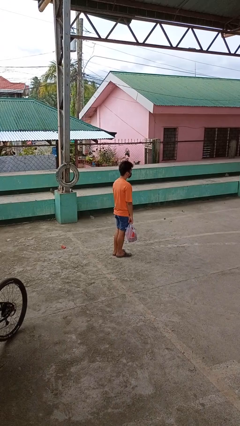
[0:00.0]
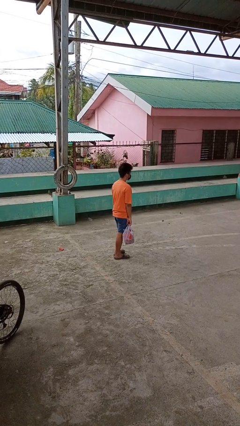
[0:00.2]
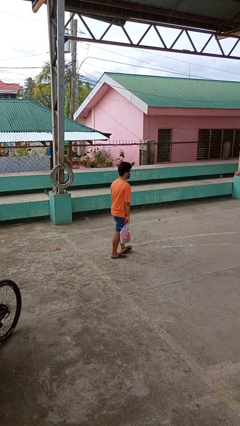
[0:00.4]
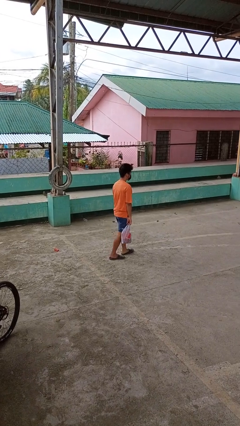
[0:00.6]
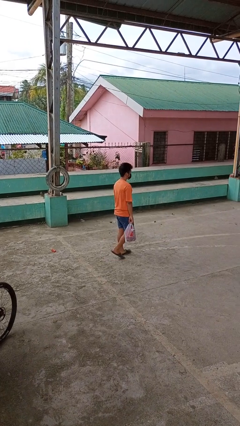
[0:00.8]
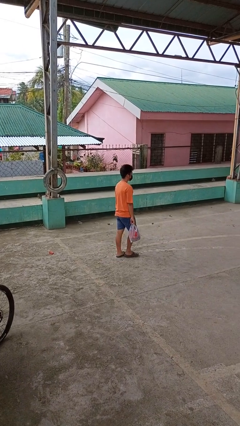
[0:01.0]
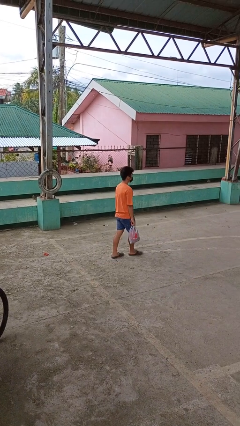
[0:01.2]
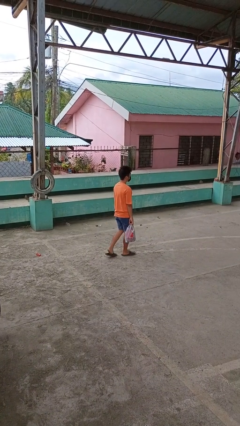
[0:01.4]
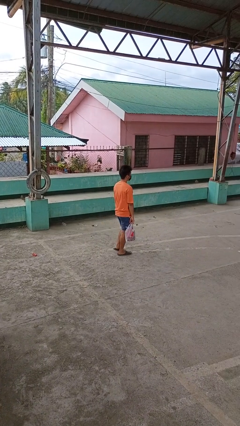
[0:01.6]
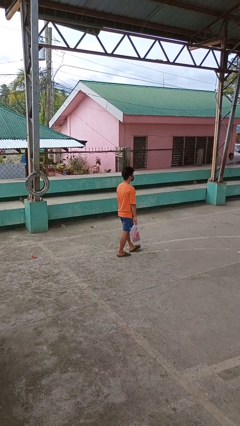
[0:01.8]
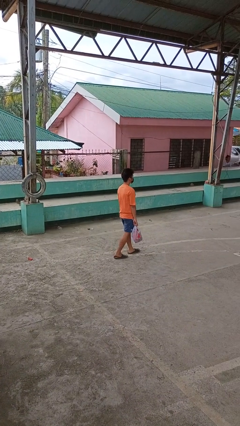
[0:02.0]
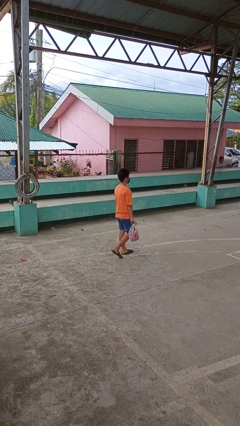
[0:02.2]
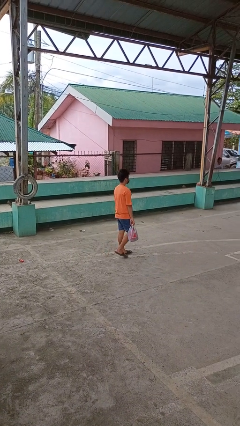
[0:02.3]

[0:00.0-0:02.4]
person carries groceries

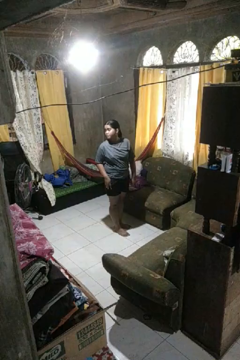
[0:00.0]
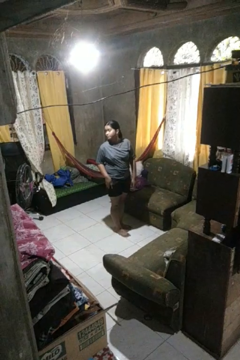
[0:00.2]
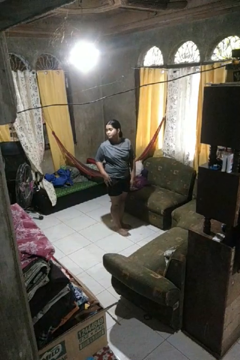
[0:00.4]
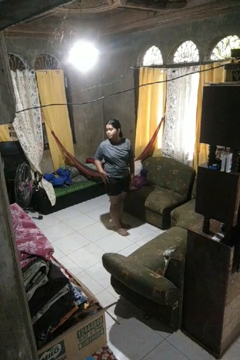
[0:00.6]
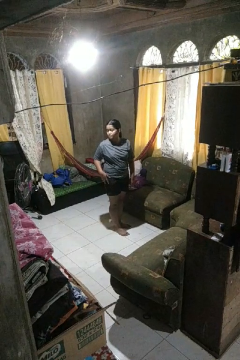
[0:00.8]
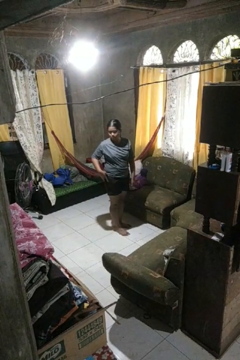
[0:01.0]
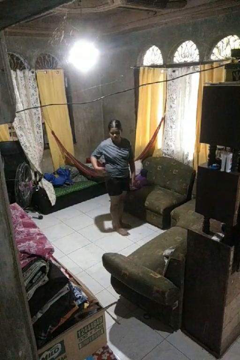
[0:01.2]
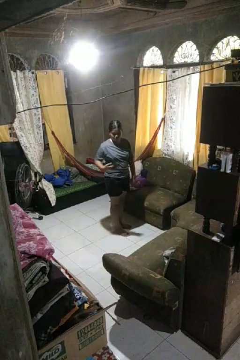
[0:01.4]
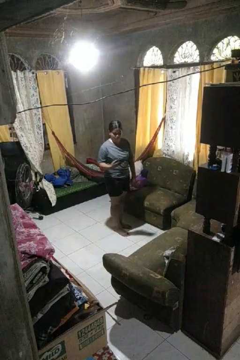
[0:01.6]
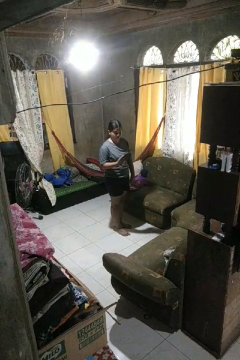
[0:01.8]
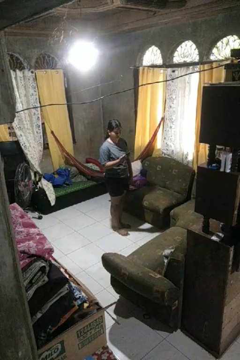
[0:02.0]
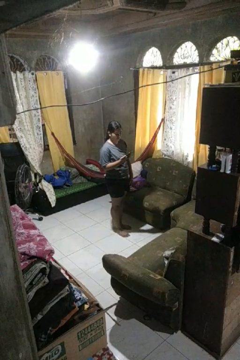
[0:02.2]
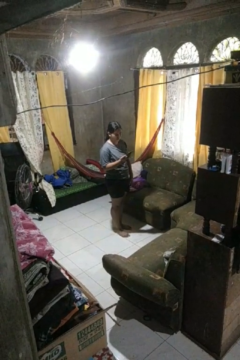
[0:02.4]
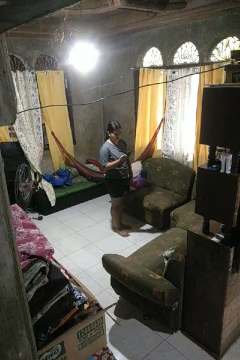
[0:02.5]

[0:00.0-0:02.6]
person takes phone from pocket

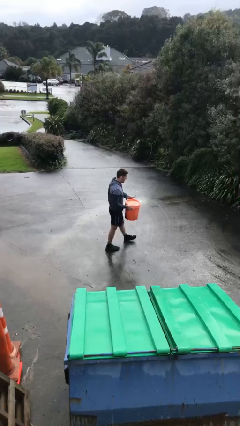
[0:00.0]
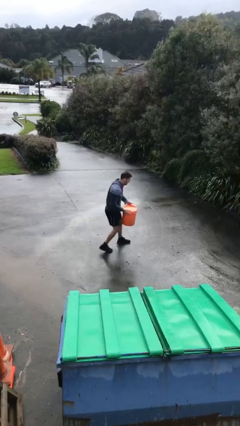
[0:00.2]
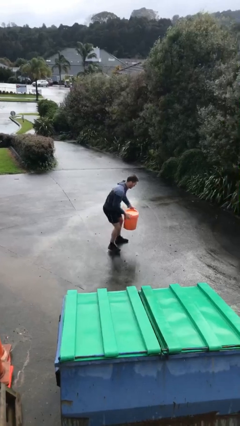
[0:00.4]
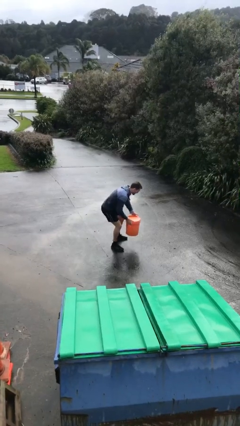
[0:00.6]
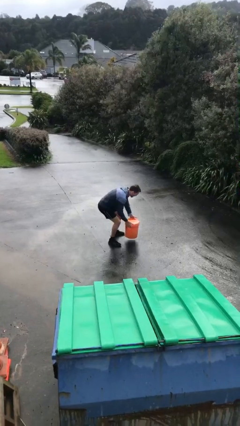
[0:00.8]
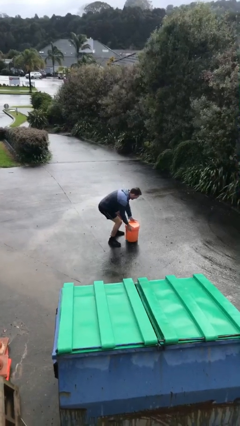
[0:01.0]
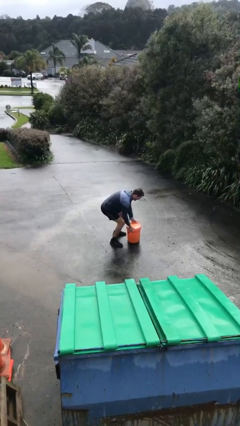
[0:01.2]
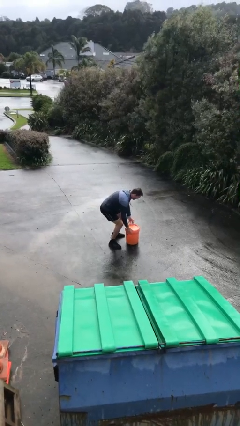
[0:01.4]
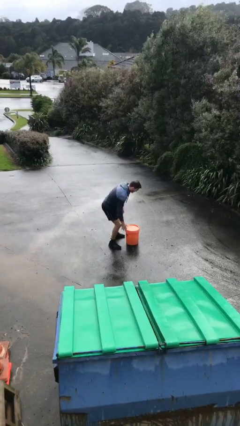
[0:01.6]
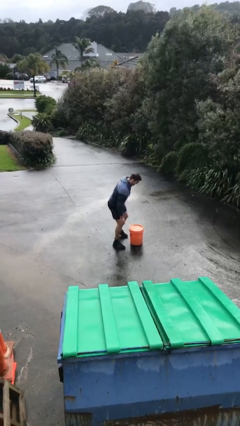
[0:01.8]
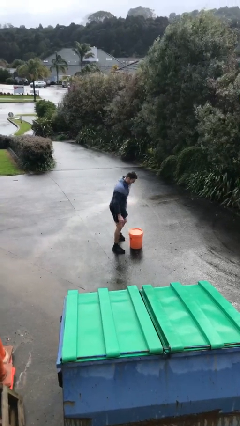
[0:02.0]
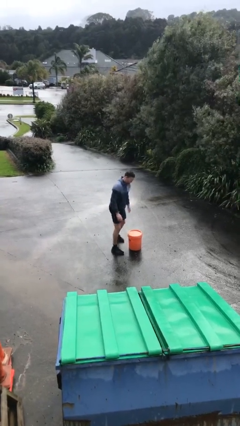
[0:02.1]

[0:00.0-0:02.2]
person puts down object on floor

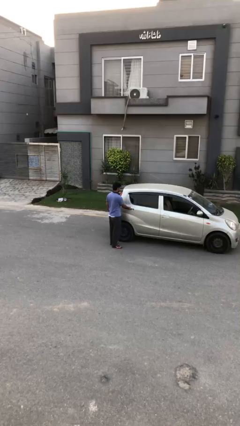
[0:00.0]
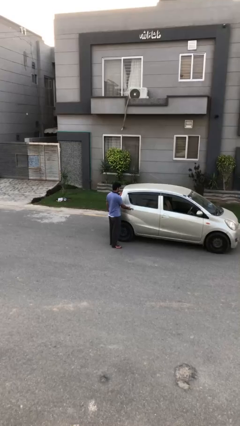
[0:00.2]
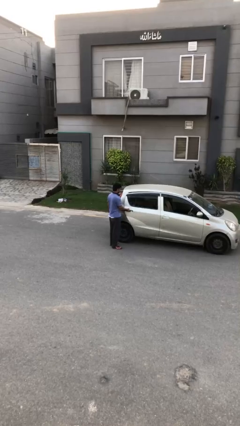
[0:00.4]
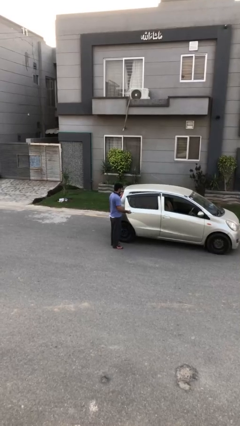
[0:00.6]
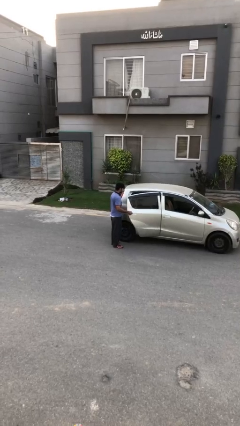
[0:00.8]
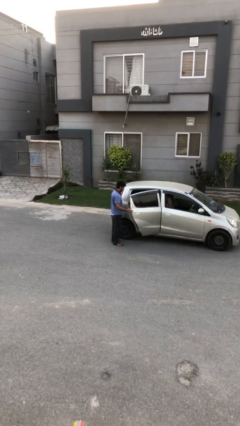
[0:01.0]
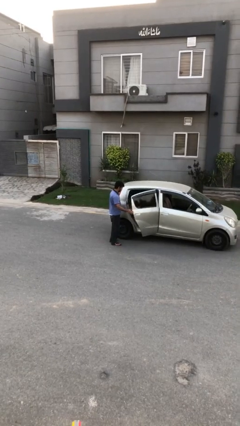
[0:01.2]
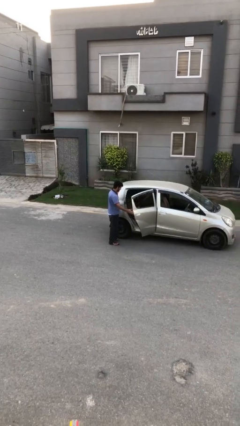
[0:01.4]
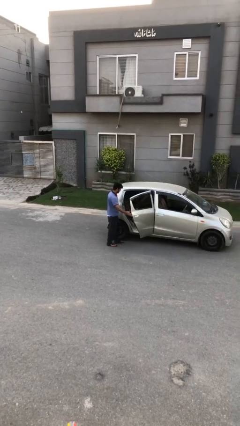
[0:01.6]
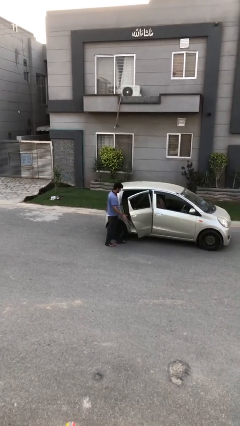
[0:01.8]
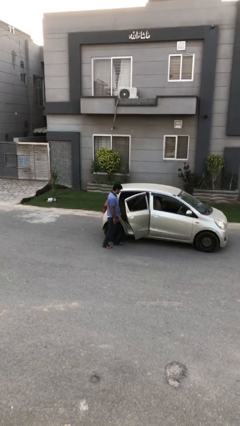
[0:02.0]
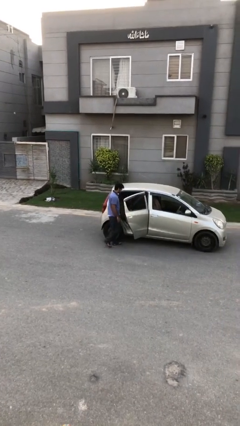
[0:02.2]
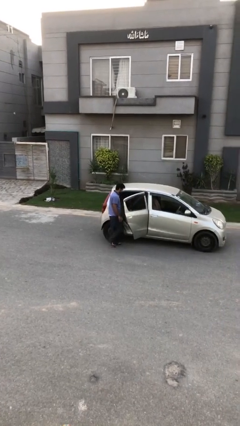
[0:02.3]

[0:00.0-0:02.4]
person opens car door

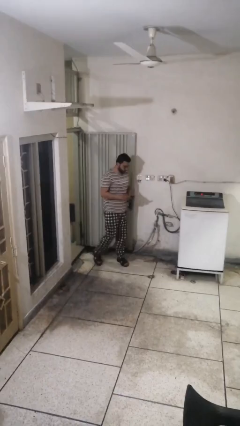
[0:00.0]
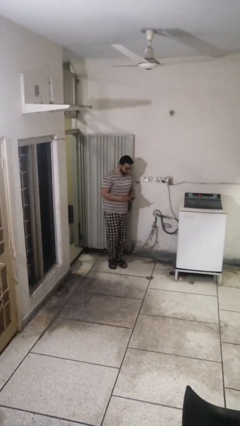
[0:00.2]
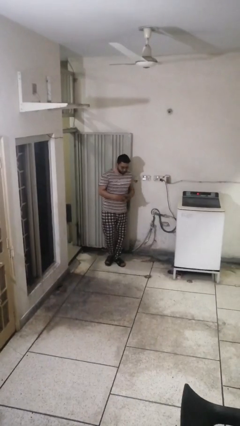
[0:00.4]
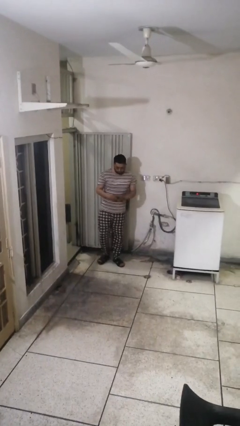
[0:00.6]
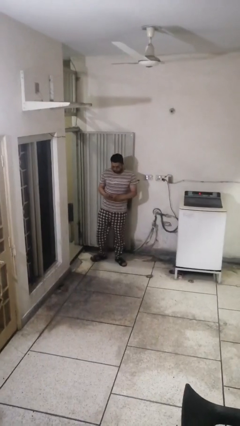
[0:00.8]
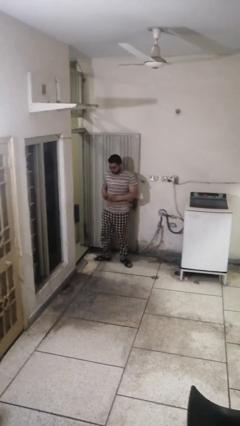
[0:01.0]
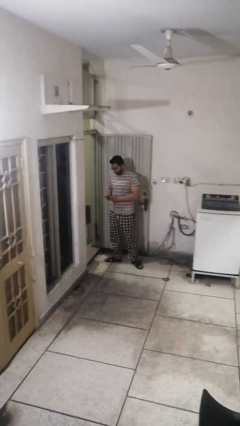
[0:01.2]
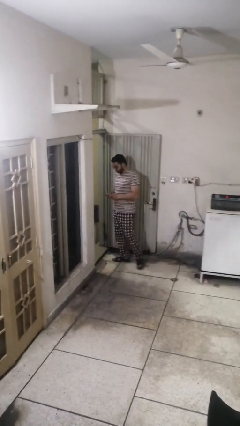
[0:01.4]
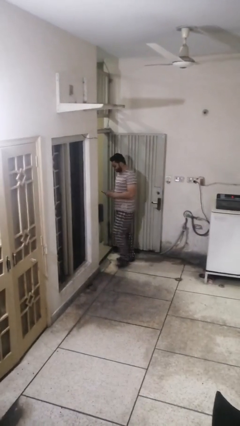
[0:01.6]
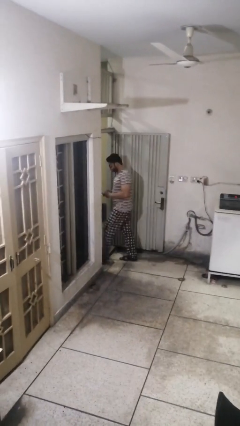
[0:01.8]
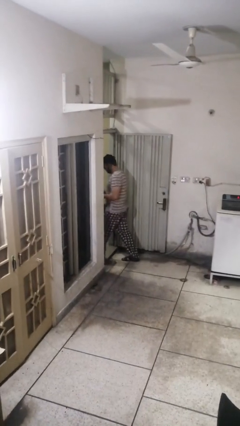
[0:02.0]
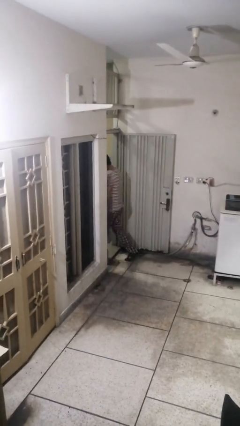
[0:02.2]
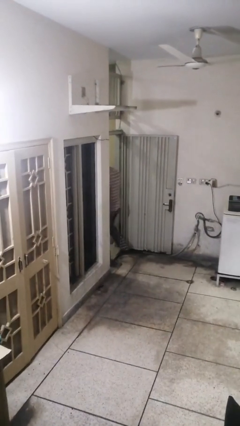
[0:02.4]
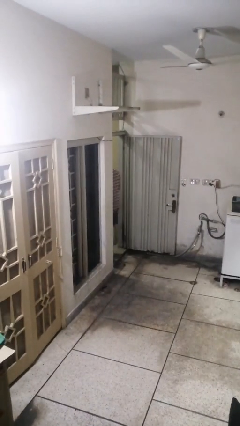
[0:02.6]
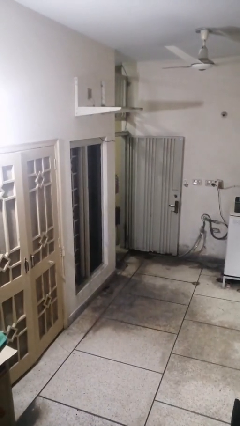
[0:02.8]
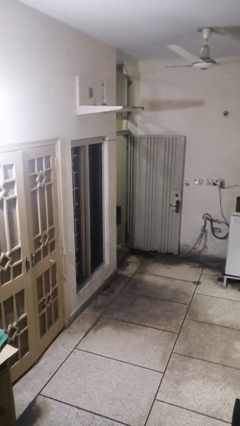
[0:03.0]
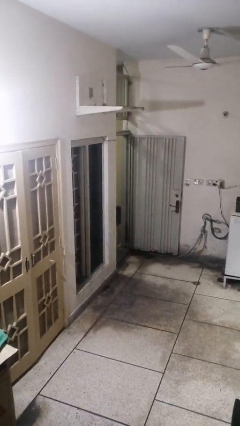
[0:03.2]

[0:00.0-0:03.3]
person exits scene through structure

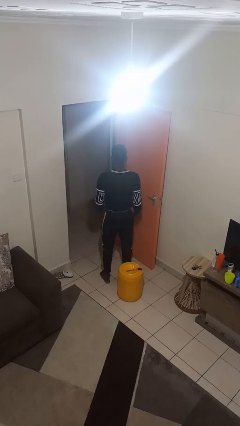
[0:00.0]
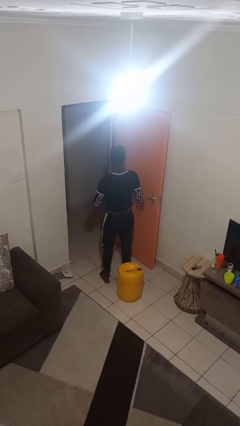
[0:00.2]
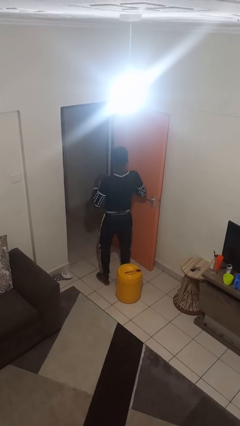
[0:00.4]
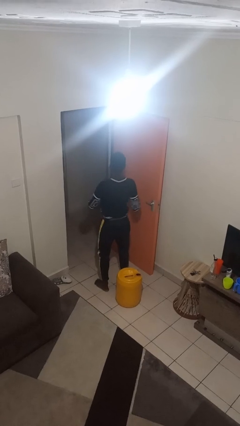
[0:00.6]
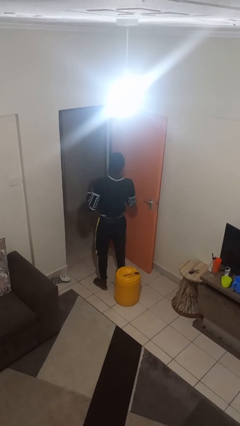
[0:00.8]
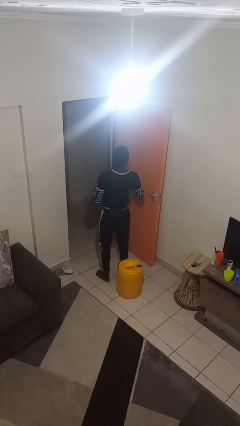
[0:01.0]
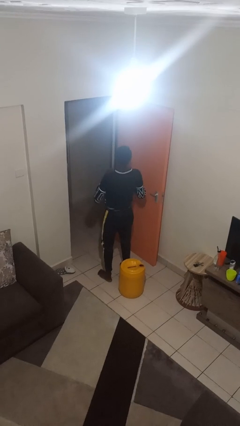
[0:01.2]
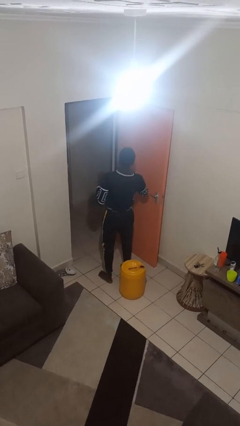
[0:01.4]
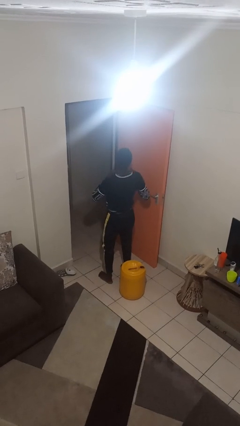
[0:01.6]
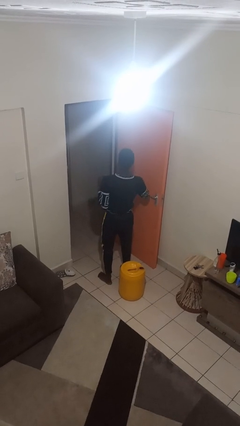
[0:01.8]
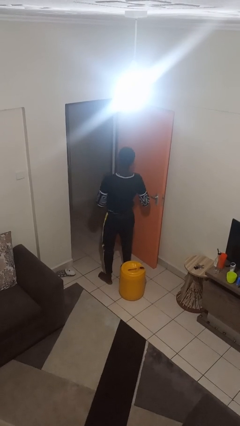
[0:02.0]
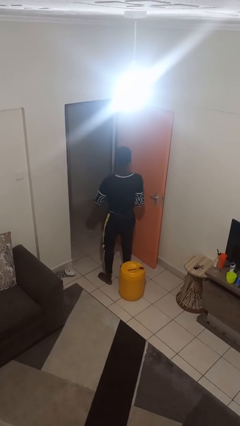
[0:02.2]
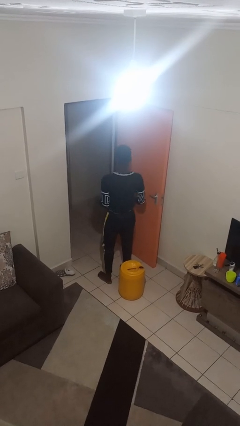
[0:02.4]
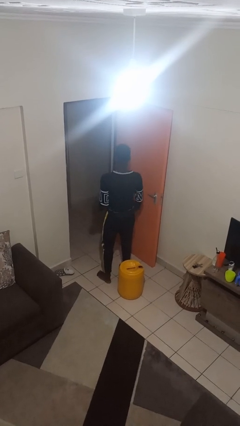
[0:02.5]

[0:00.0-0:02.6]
person drums on chest

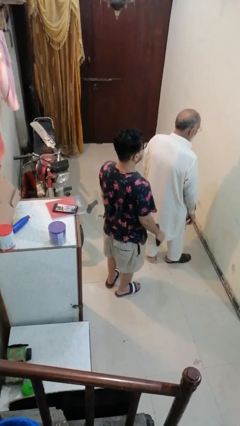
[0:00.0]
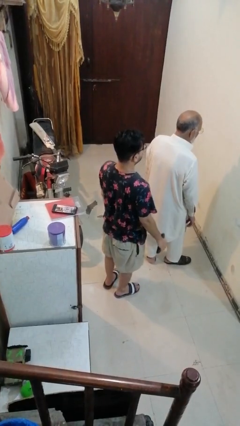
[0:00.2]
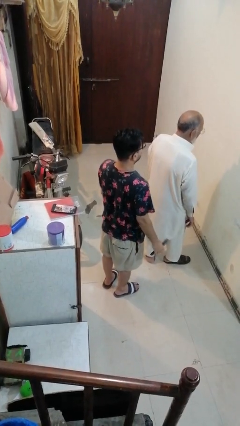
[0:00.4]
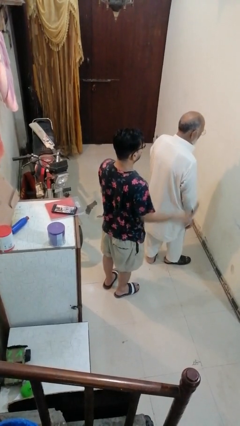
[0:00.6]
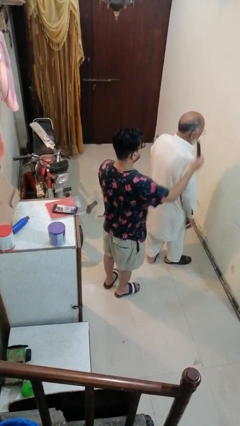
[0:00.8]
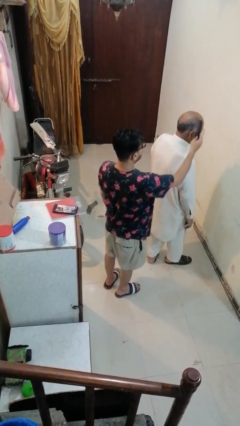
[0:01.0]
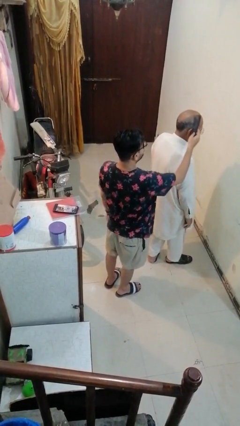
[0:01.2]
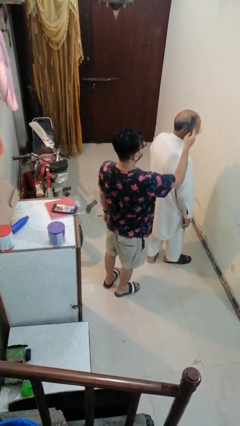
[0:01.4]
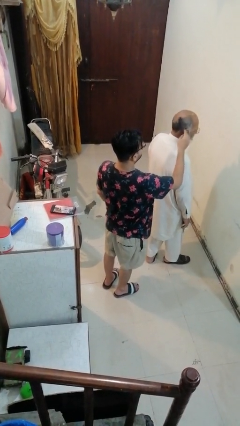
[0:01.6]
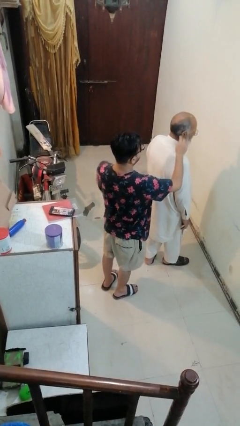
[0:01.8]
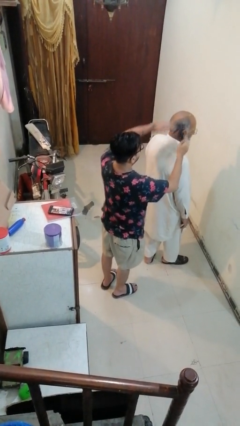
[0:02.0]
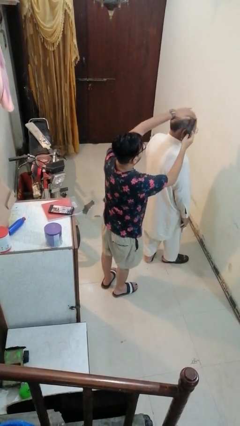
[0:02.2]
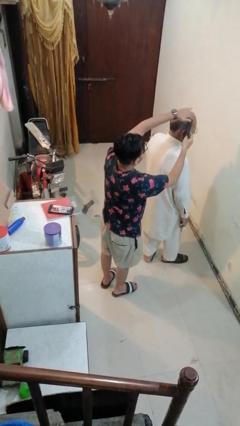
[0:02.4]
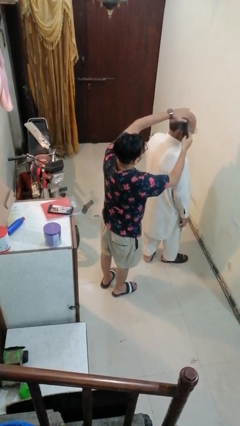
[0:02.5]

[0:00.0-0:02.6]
person brushes hair of person
